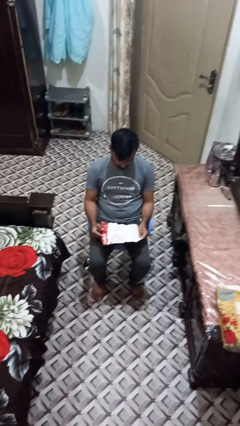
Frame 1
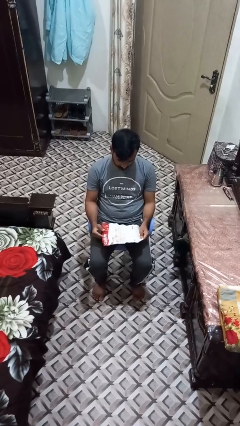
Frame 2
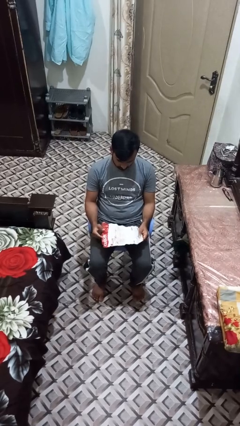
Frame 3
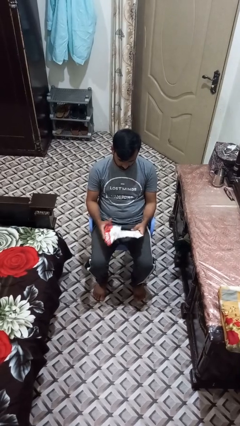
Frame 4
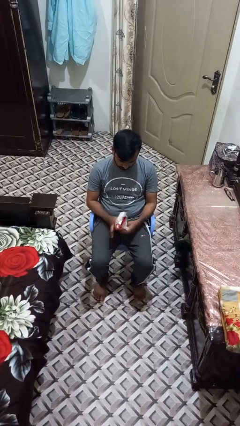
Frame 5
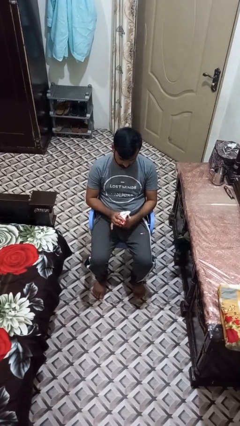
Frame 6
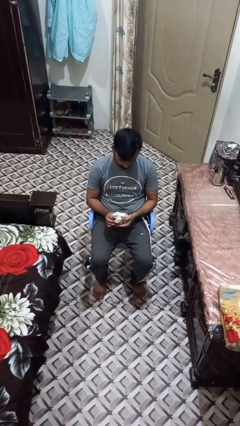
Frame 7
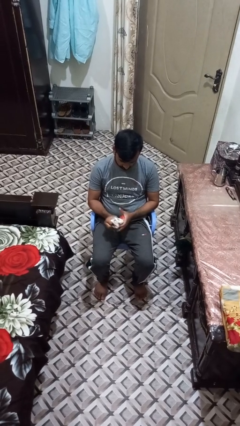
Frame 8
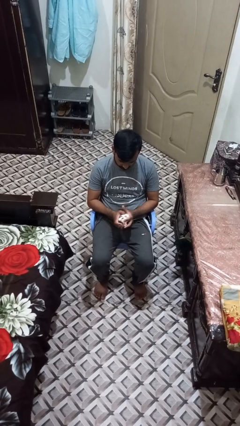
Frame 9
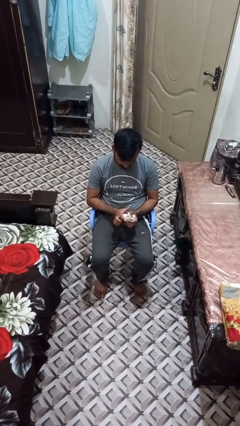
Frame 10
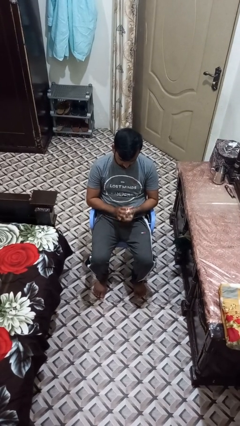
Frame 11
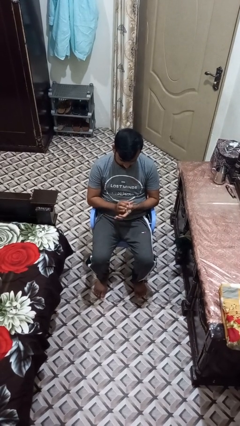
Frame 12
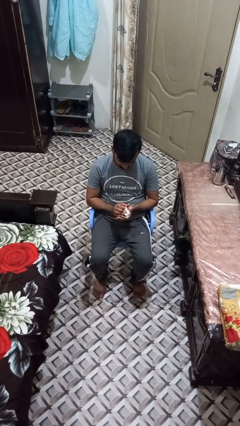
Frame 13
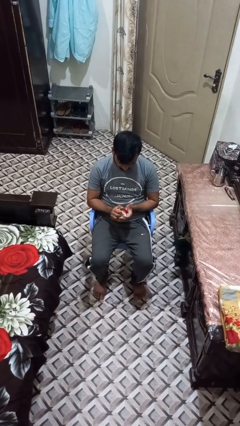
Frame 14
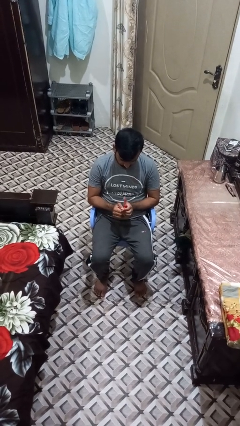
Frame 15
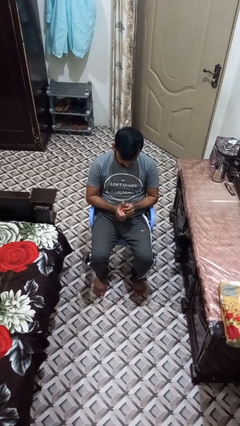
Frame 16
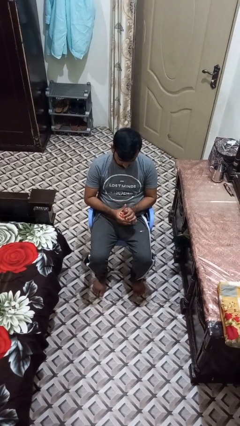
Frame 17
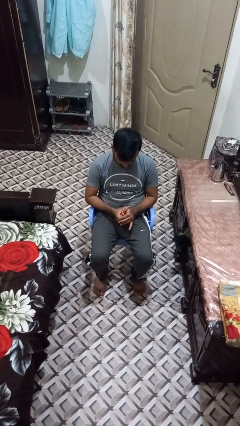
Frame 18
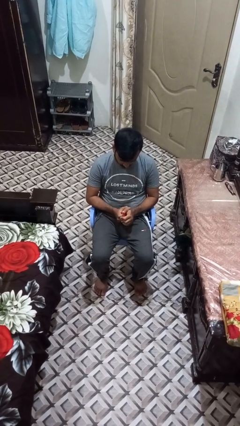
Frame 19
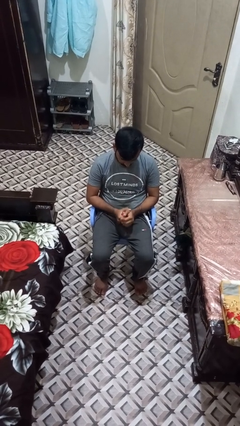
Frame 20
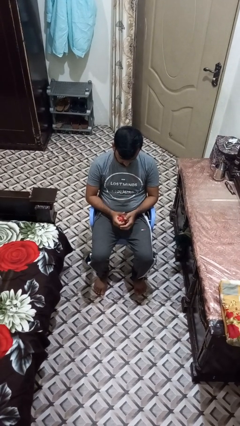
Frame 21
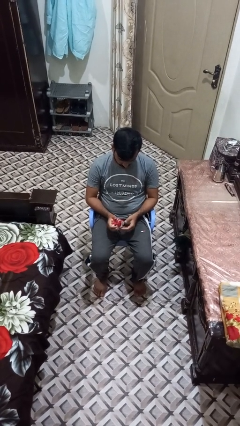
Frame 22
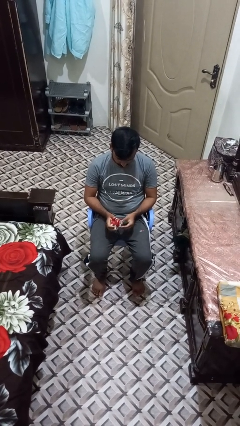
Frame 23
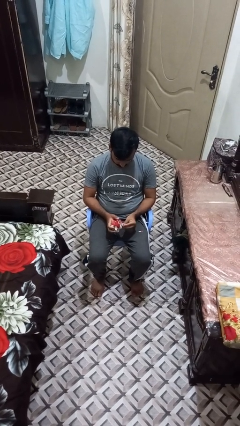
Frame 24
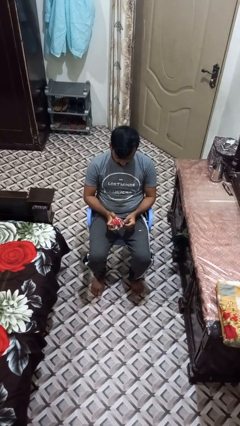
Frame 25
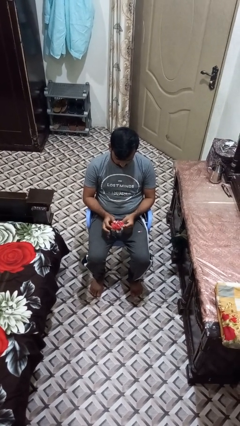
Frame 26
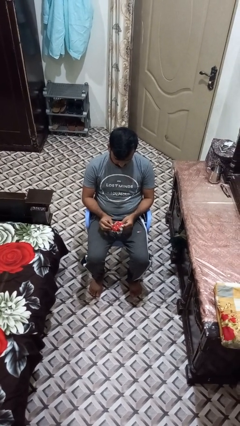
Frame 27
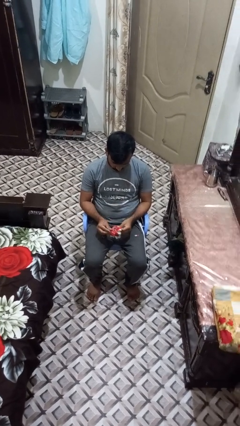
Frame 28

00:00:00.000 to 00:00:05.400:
person crumples paper

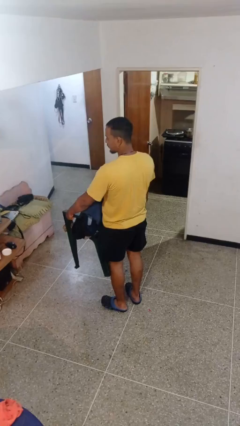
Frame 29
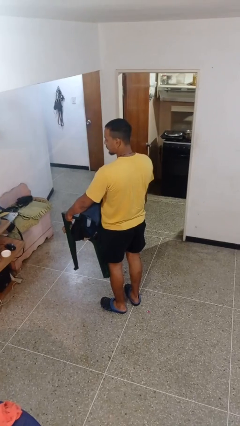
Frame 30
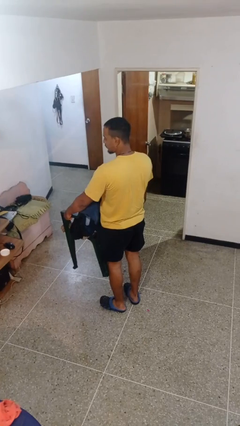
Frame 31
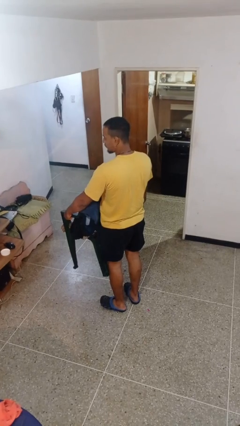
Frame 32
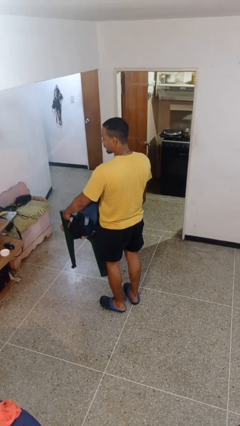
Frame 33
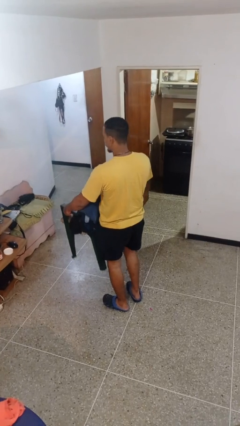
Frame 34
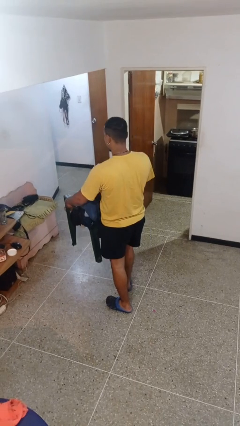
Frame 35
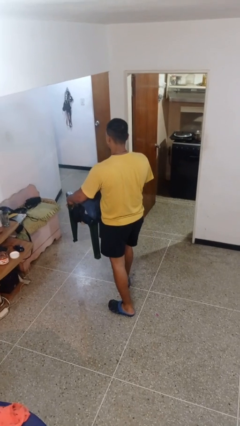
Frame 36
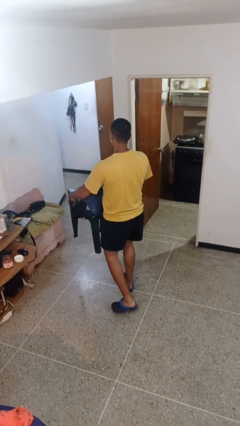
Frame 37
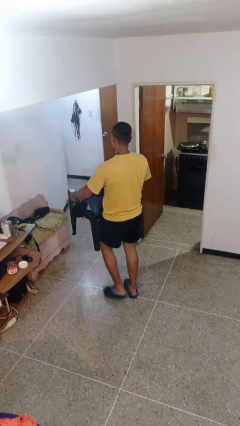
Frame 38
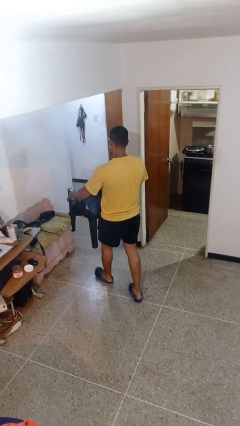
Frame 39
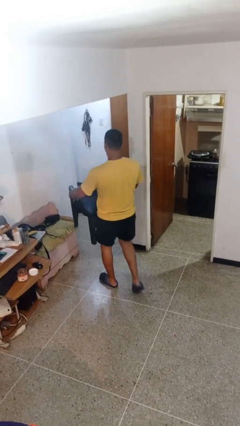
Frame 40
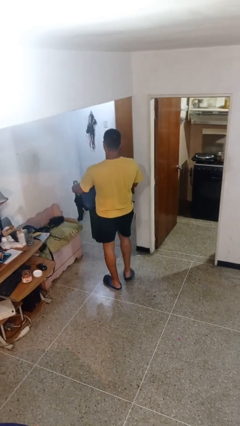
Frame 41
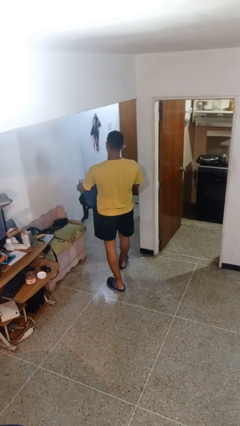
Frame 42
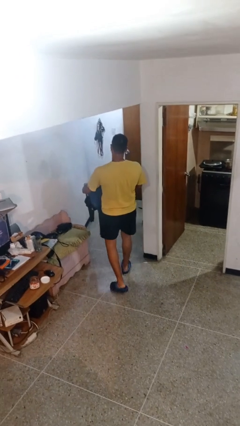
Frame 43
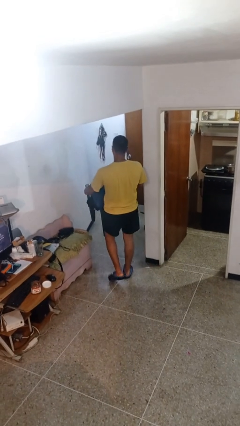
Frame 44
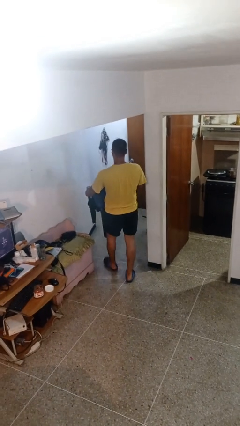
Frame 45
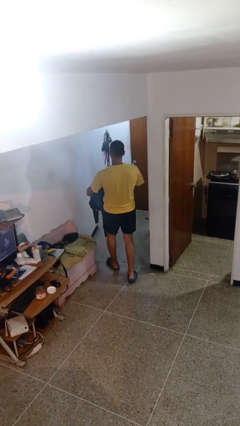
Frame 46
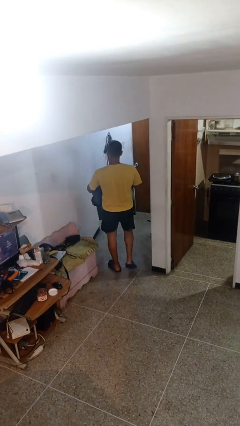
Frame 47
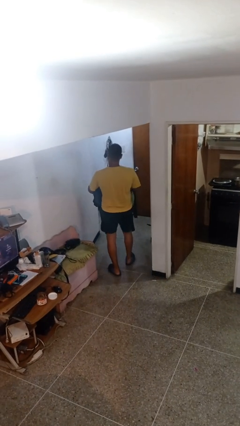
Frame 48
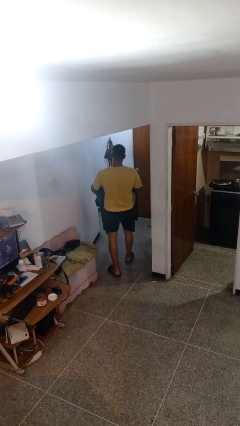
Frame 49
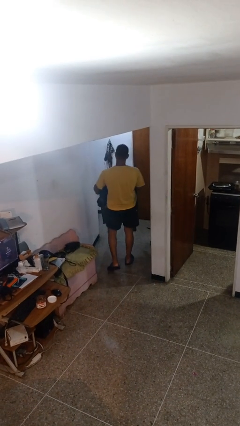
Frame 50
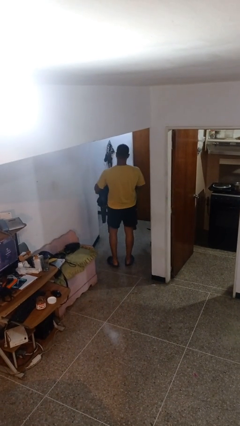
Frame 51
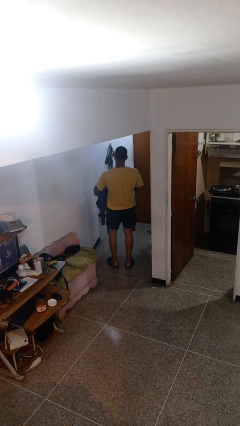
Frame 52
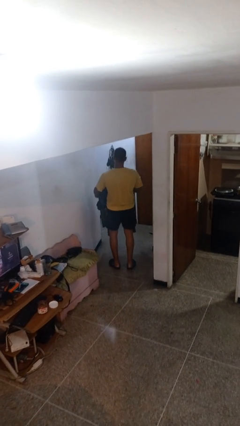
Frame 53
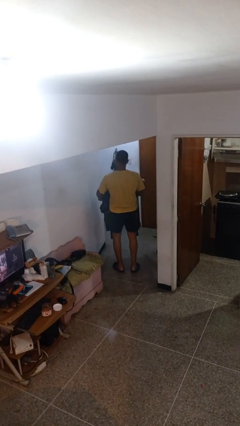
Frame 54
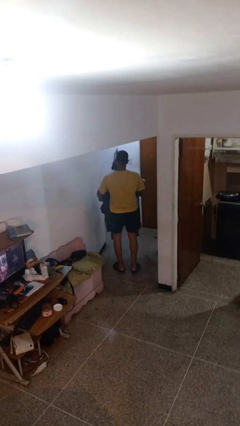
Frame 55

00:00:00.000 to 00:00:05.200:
person carries furniture

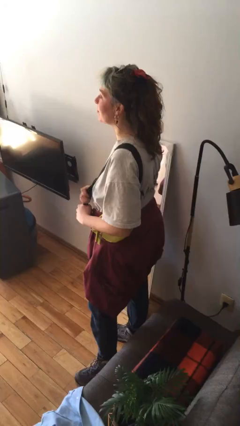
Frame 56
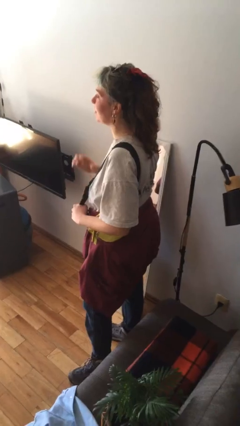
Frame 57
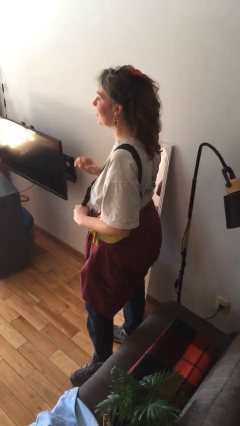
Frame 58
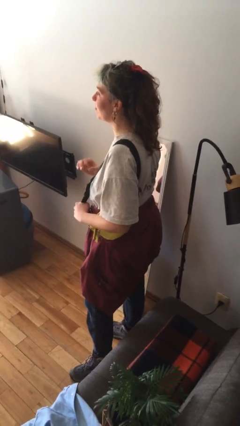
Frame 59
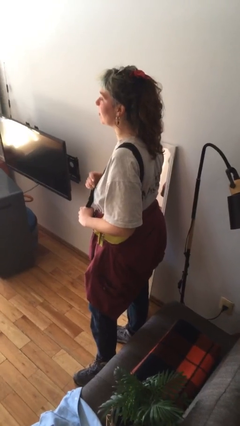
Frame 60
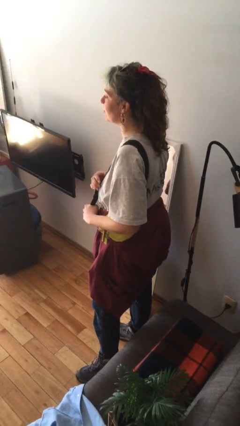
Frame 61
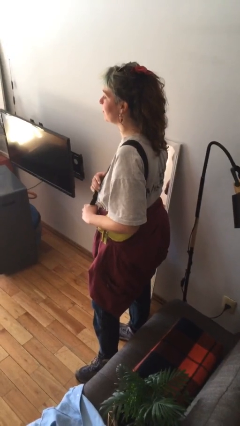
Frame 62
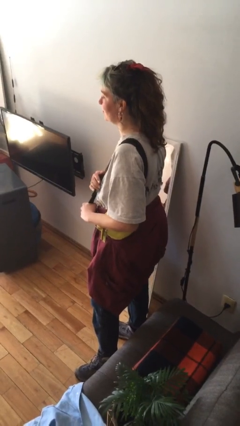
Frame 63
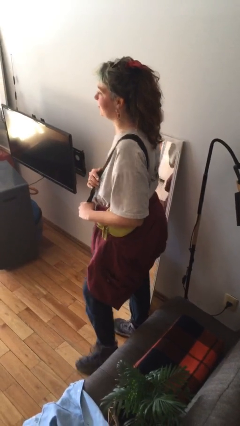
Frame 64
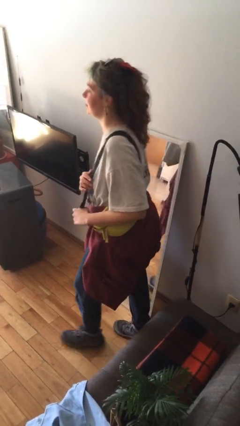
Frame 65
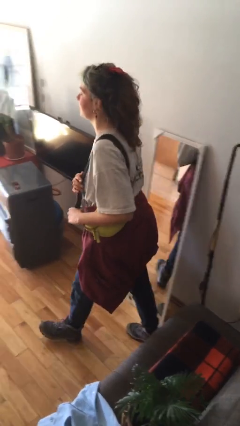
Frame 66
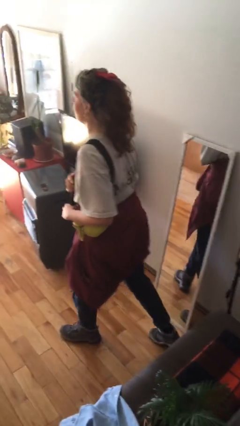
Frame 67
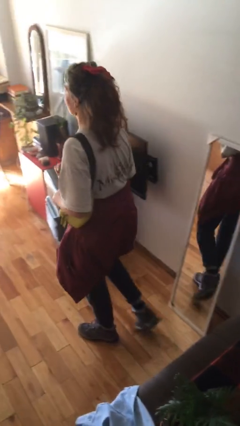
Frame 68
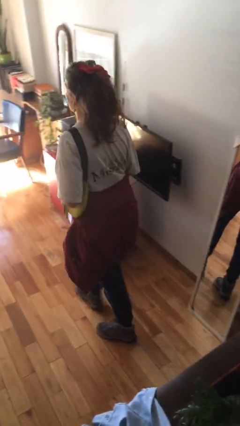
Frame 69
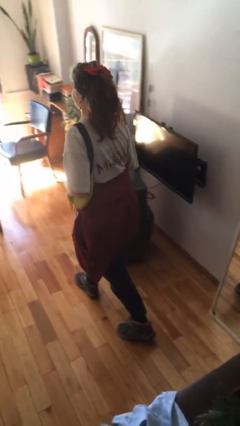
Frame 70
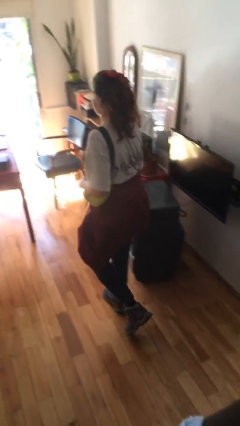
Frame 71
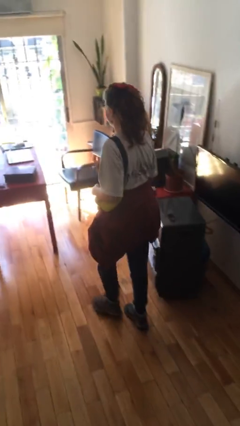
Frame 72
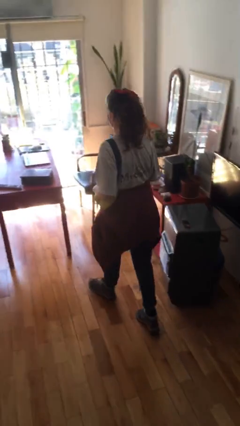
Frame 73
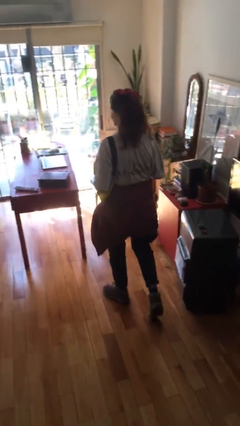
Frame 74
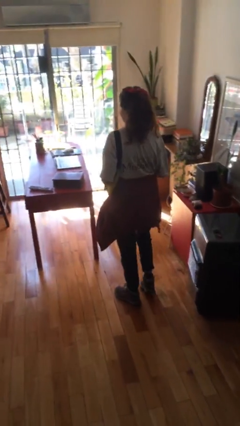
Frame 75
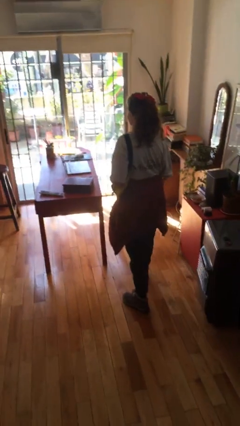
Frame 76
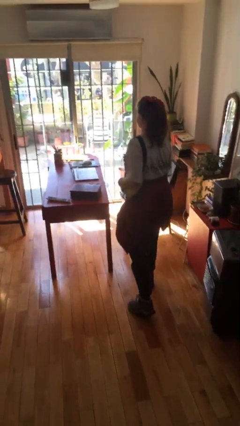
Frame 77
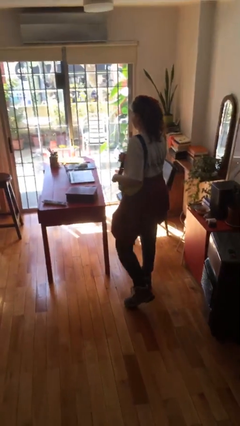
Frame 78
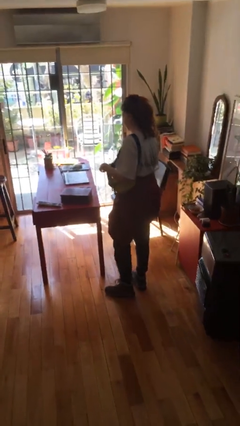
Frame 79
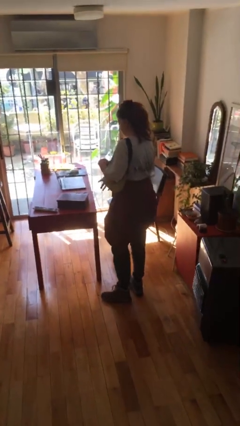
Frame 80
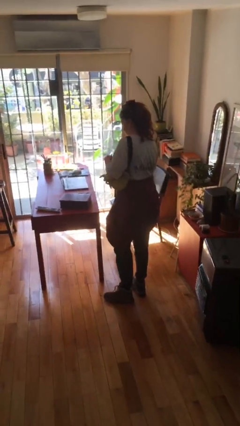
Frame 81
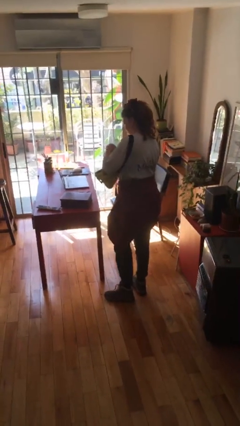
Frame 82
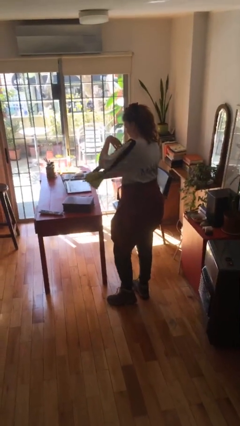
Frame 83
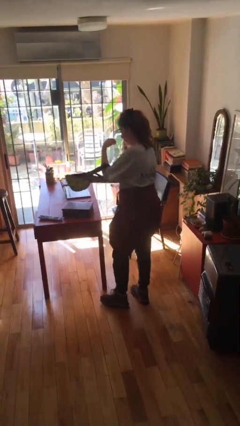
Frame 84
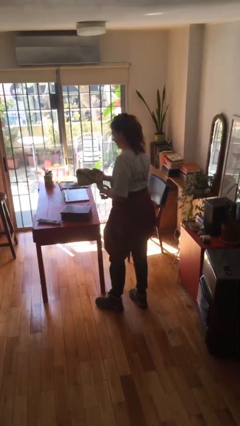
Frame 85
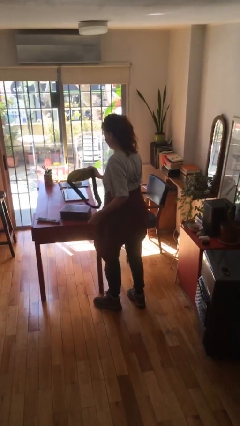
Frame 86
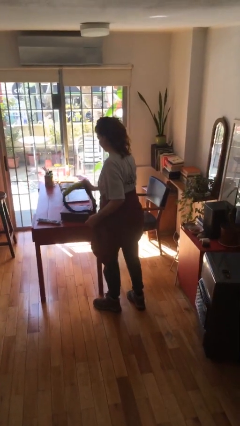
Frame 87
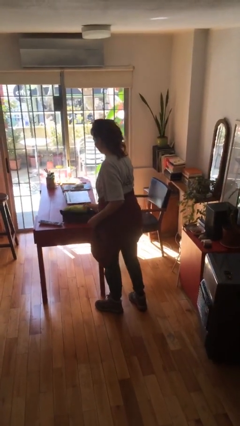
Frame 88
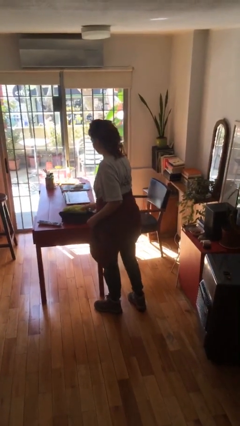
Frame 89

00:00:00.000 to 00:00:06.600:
person puts down object on table

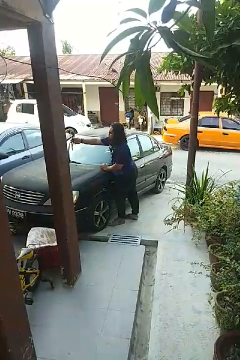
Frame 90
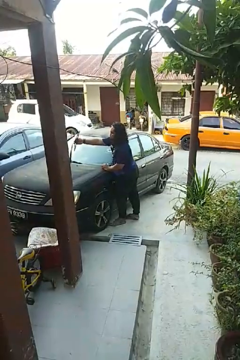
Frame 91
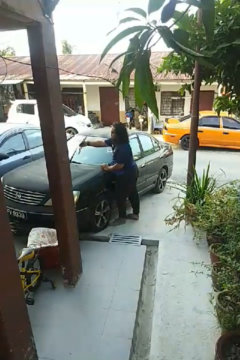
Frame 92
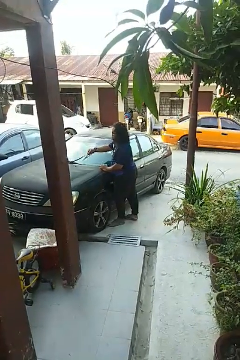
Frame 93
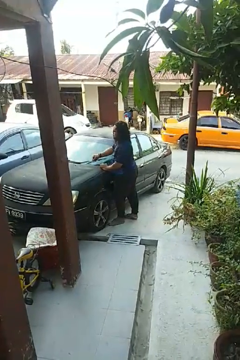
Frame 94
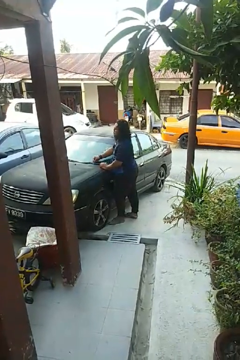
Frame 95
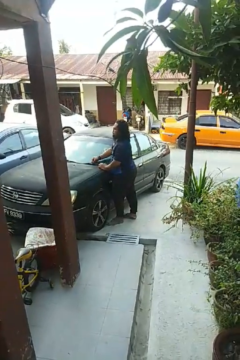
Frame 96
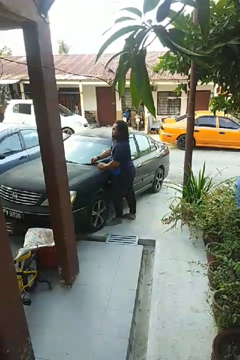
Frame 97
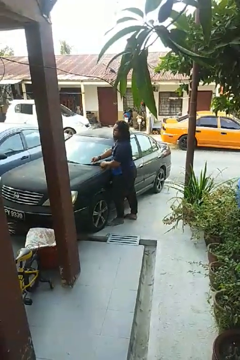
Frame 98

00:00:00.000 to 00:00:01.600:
person flips down car wipers
